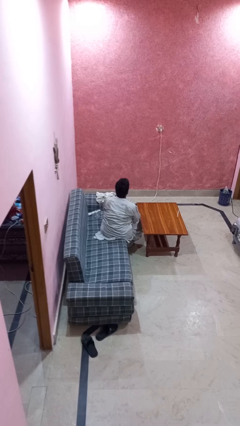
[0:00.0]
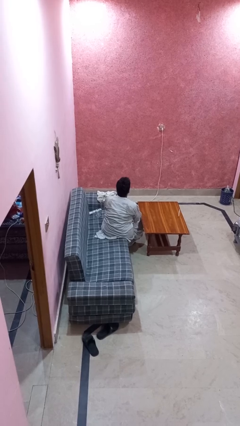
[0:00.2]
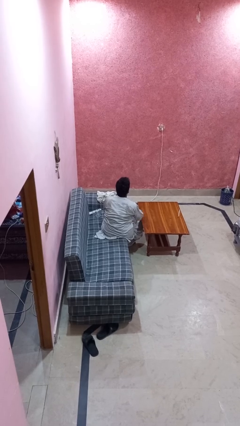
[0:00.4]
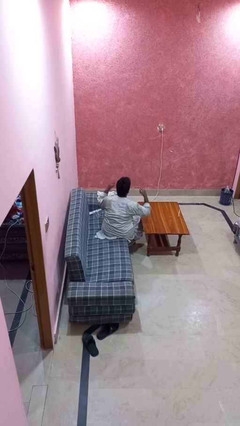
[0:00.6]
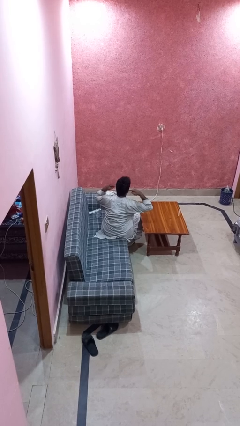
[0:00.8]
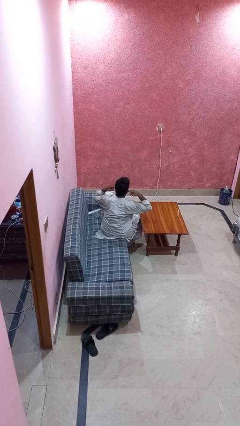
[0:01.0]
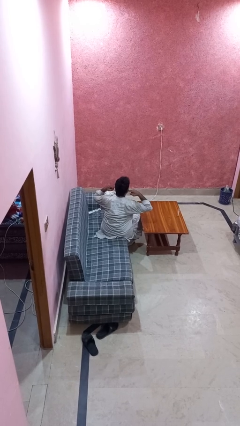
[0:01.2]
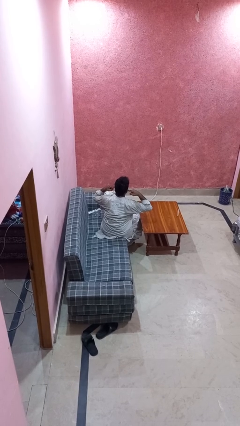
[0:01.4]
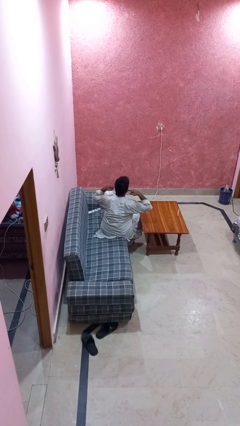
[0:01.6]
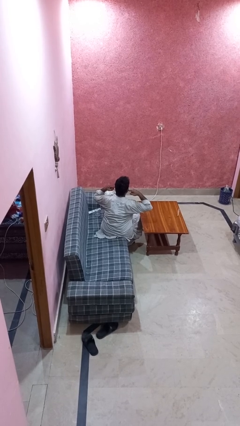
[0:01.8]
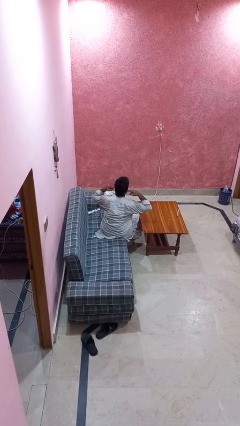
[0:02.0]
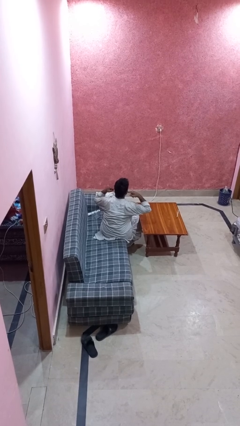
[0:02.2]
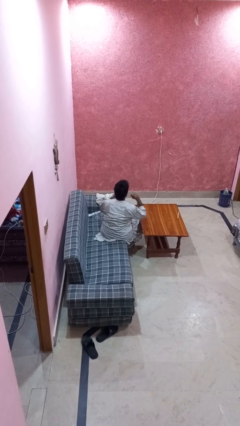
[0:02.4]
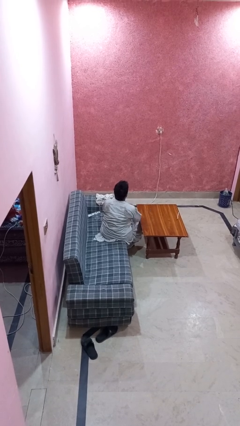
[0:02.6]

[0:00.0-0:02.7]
person puts fingers in ear

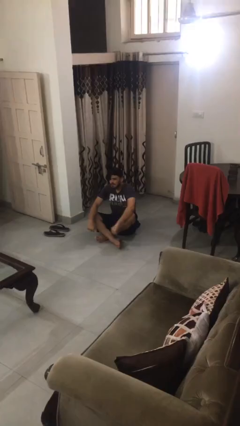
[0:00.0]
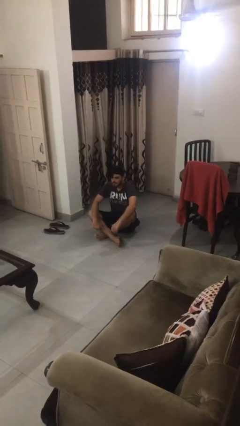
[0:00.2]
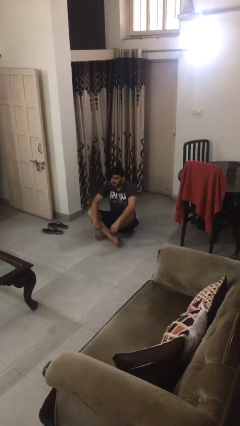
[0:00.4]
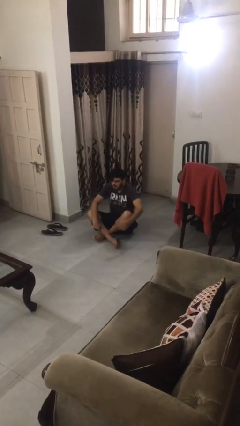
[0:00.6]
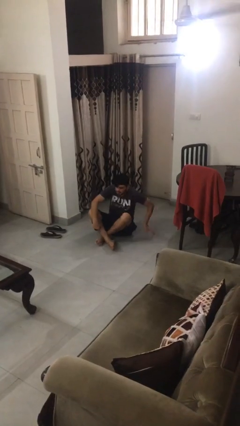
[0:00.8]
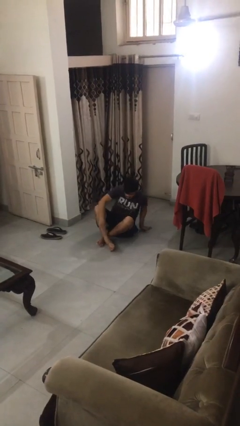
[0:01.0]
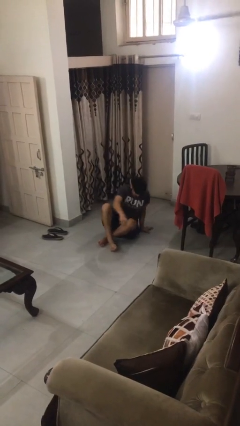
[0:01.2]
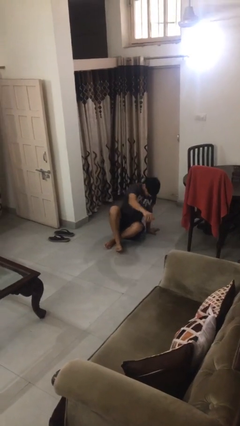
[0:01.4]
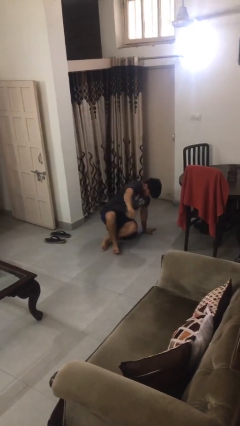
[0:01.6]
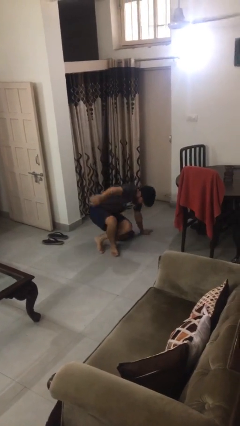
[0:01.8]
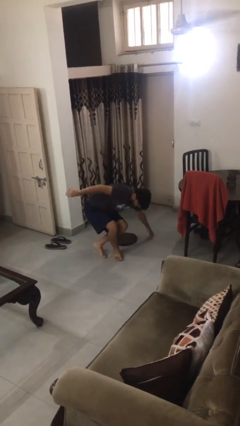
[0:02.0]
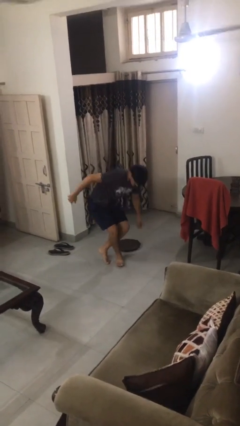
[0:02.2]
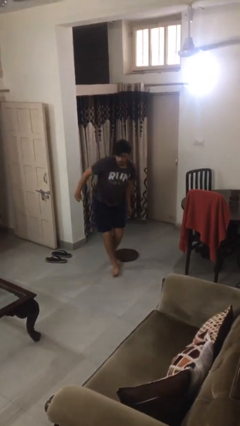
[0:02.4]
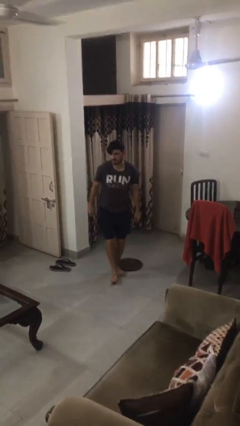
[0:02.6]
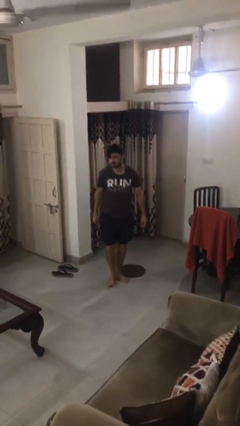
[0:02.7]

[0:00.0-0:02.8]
person stands up from floor

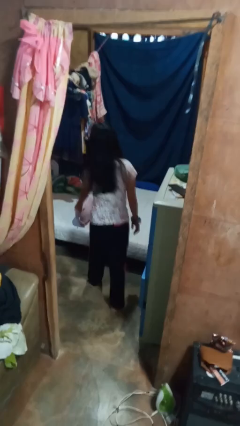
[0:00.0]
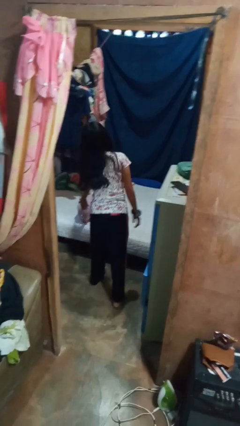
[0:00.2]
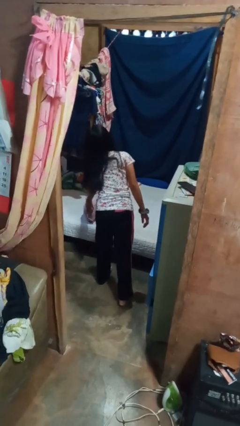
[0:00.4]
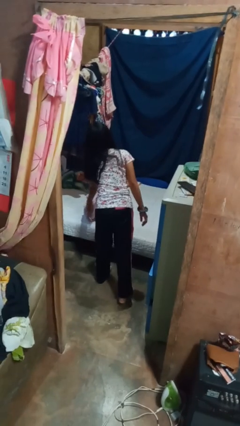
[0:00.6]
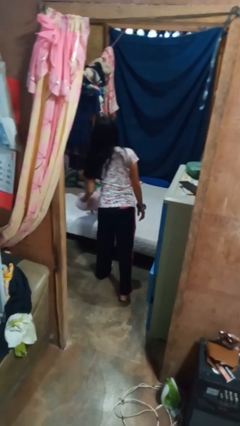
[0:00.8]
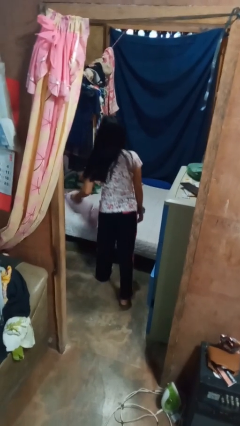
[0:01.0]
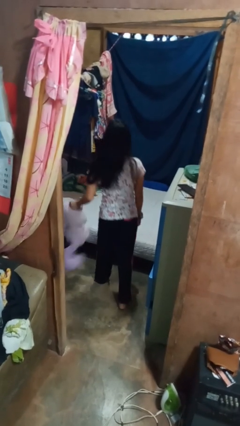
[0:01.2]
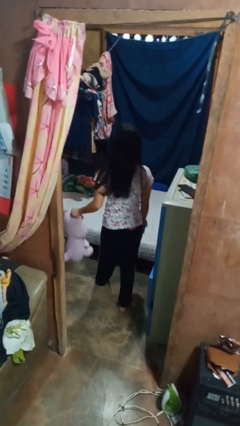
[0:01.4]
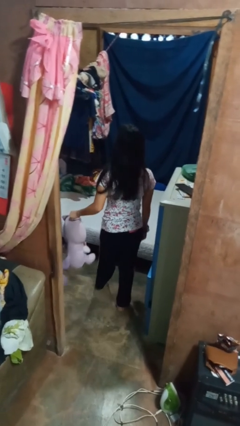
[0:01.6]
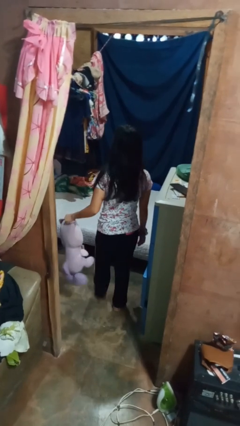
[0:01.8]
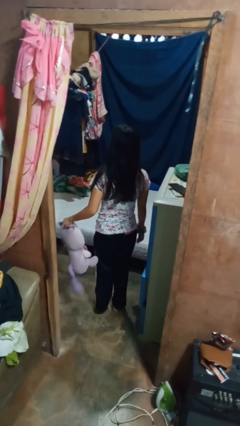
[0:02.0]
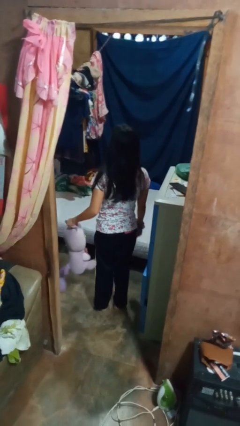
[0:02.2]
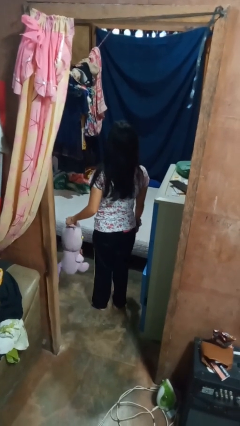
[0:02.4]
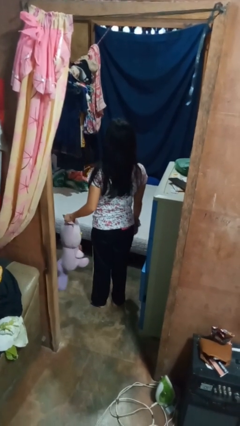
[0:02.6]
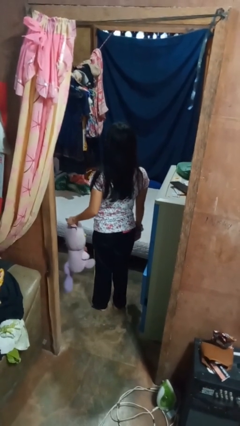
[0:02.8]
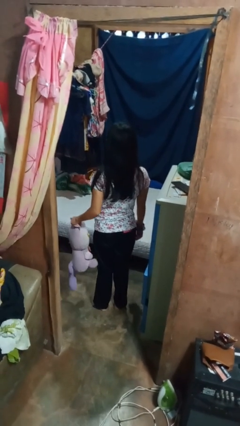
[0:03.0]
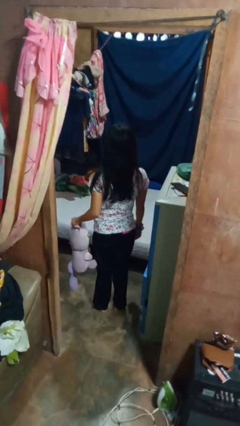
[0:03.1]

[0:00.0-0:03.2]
person picks up object from bed

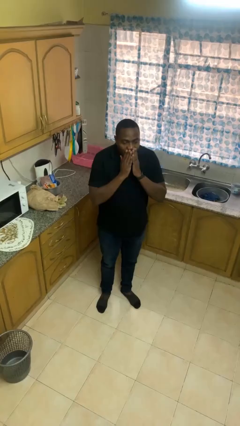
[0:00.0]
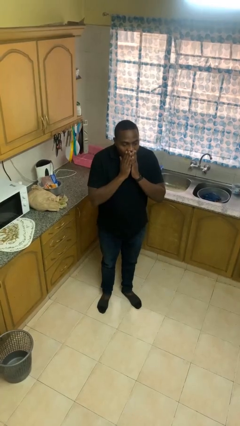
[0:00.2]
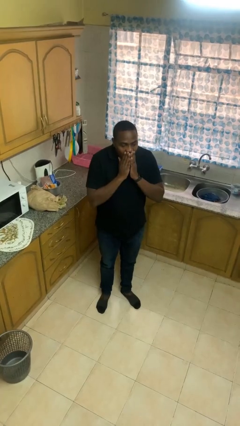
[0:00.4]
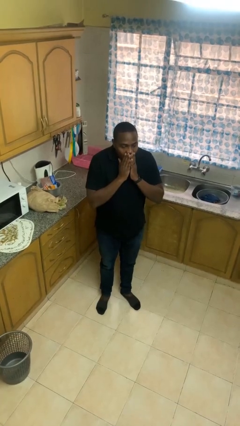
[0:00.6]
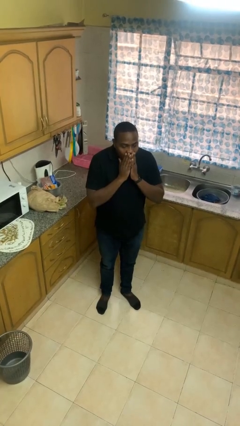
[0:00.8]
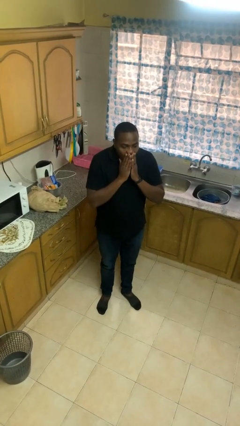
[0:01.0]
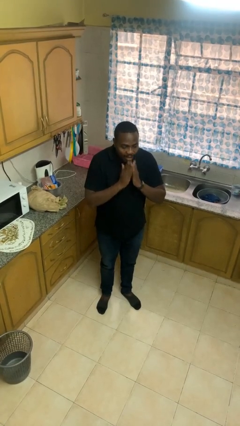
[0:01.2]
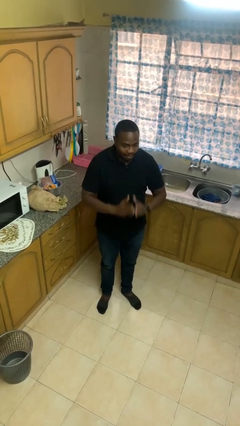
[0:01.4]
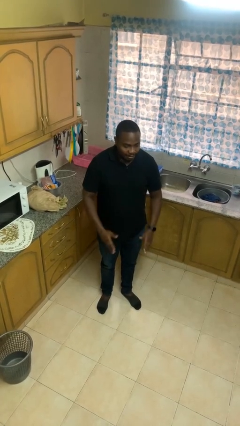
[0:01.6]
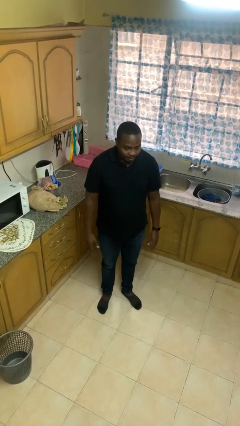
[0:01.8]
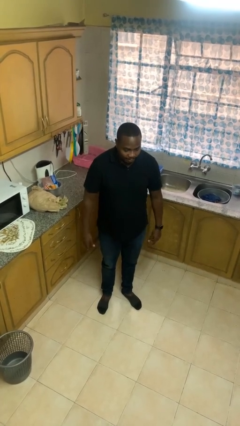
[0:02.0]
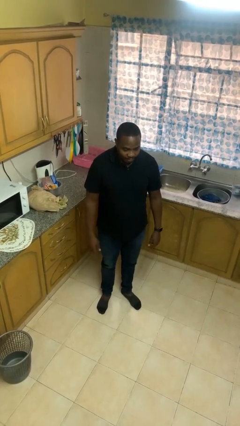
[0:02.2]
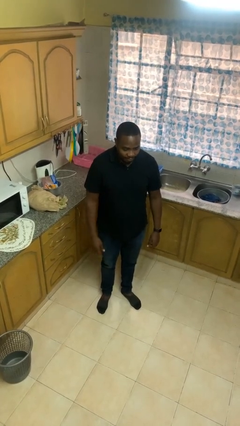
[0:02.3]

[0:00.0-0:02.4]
person yawns

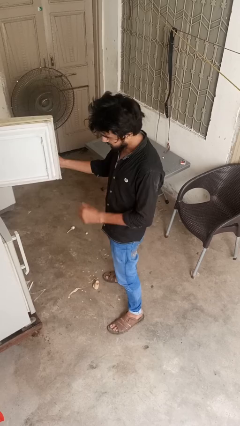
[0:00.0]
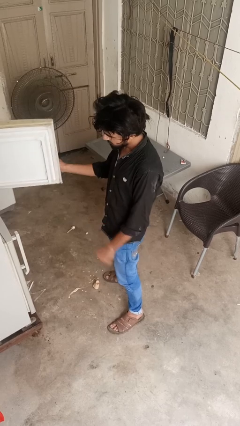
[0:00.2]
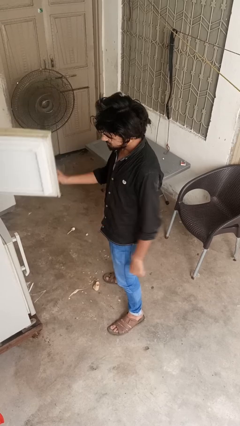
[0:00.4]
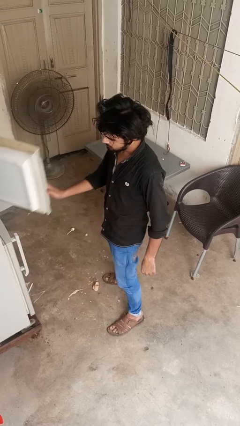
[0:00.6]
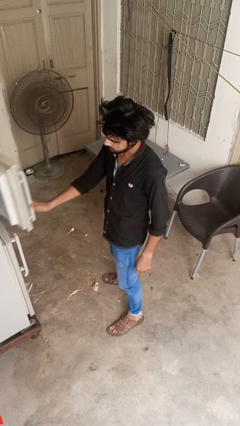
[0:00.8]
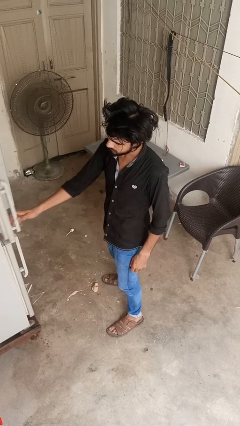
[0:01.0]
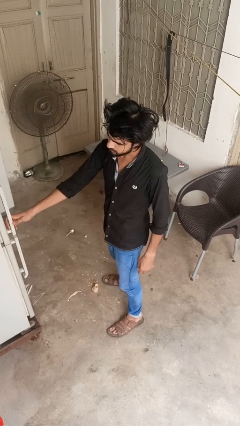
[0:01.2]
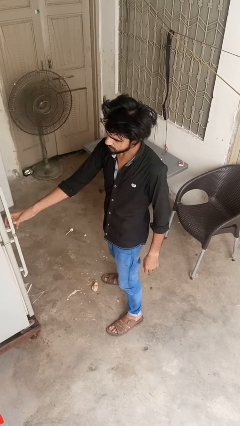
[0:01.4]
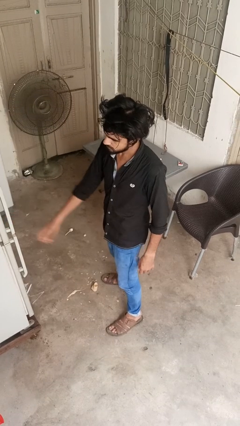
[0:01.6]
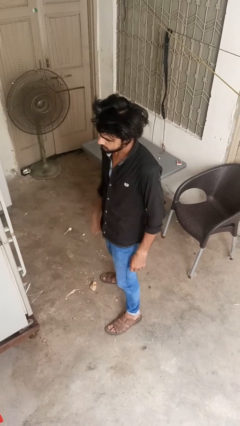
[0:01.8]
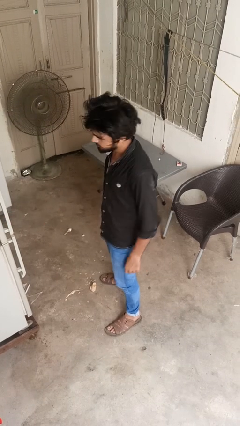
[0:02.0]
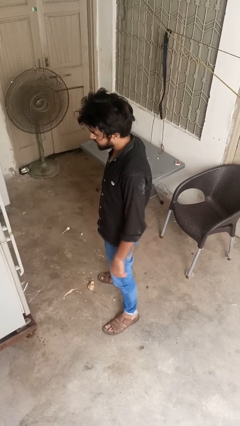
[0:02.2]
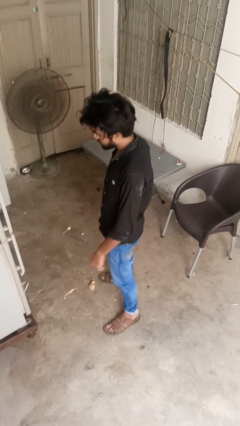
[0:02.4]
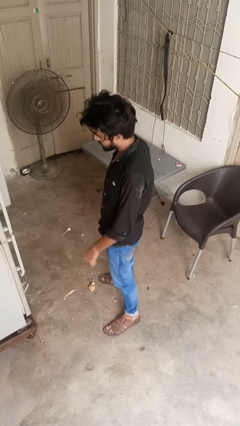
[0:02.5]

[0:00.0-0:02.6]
person closes refrigerator

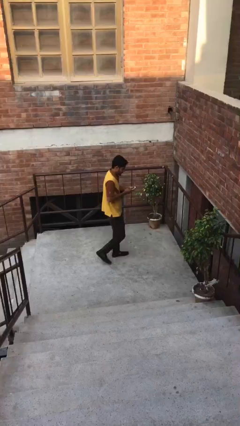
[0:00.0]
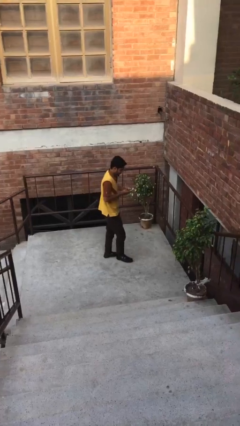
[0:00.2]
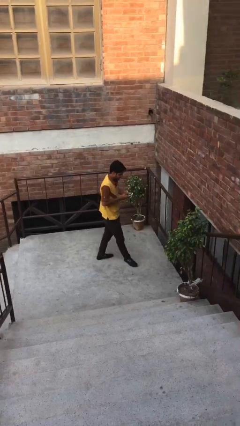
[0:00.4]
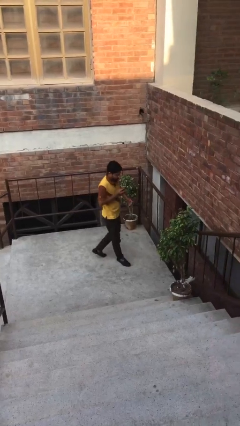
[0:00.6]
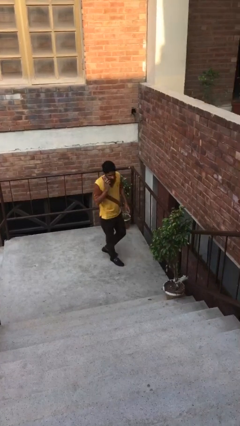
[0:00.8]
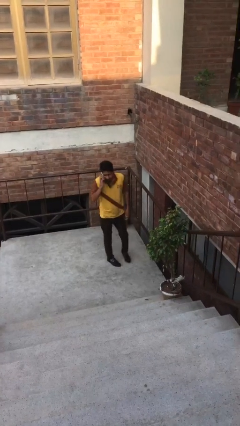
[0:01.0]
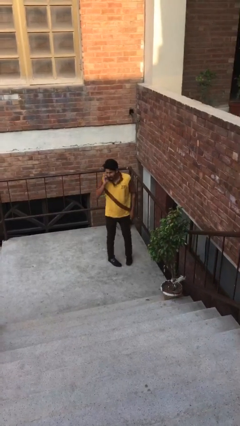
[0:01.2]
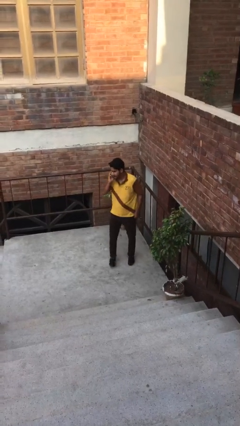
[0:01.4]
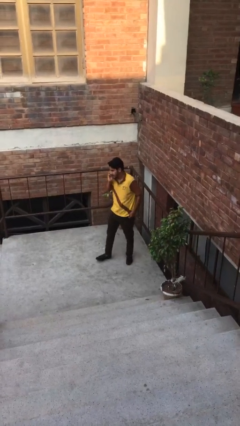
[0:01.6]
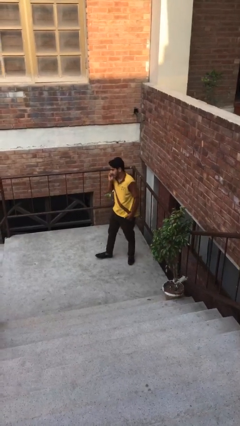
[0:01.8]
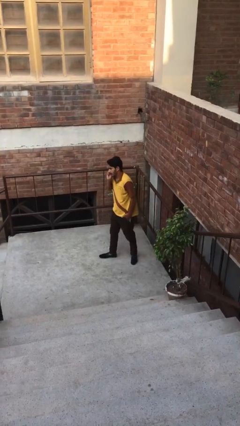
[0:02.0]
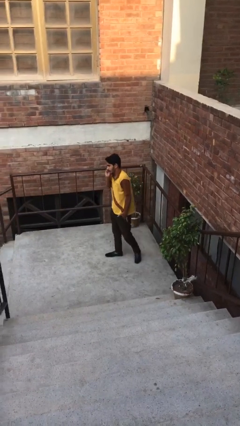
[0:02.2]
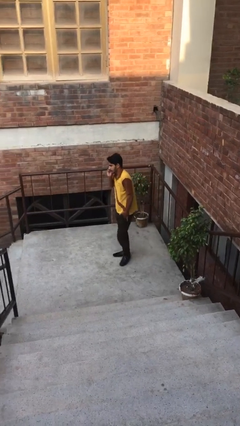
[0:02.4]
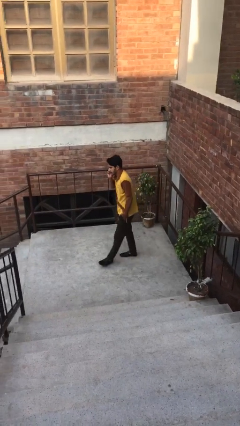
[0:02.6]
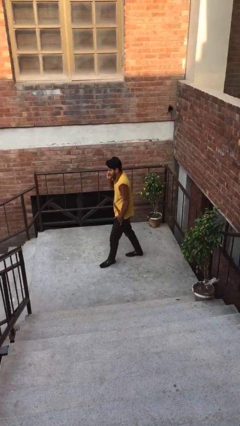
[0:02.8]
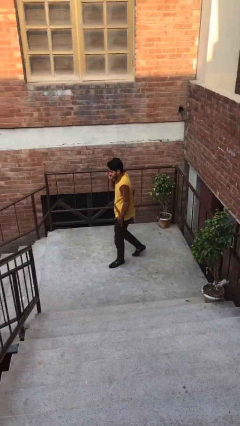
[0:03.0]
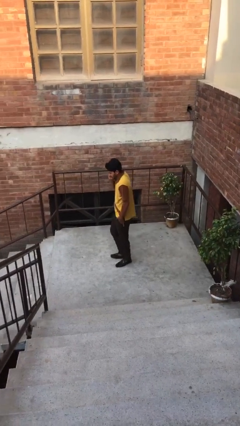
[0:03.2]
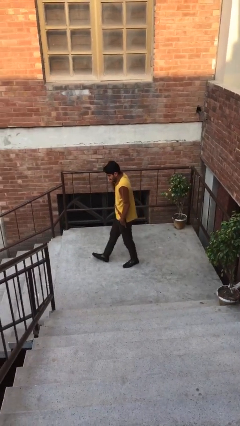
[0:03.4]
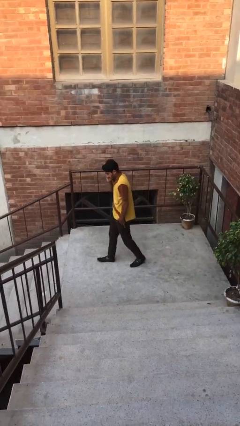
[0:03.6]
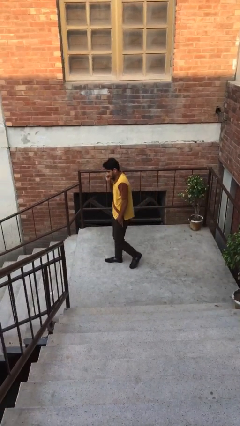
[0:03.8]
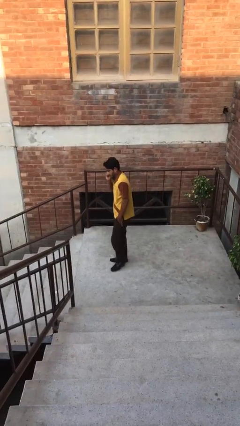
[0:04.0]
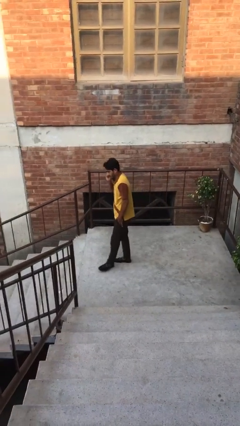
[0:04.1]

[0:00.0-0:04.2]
person talks on phone
